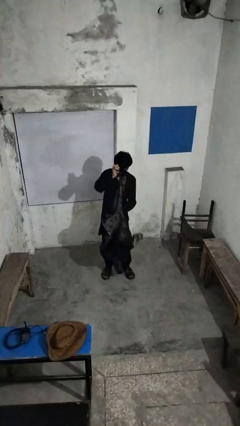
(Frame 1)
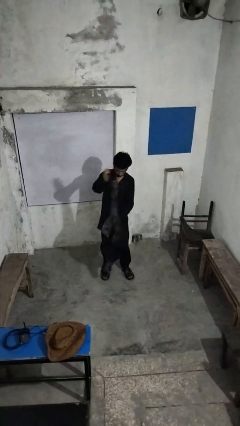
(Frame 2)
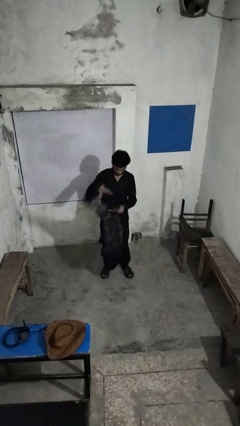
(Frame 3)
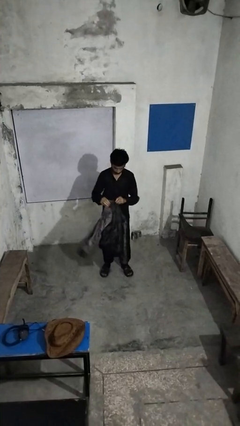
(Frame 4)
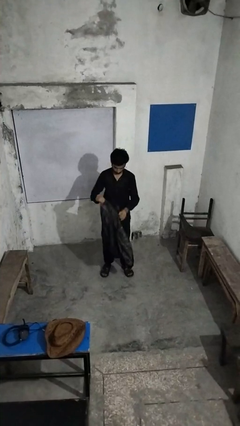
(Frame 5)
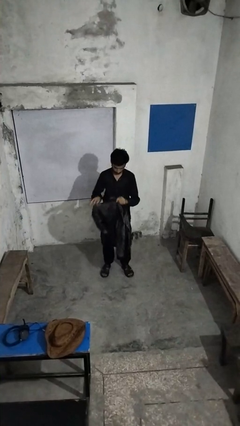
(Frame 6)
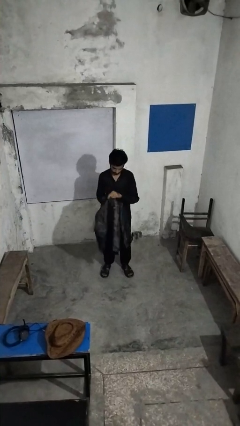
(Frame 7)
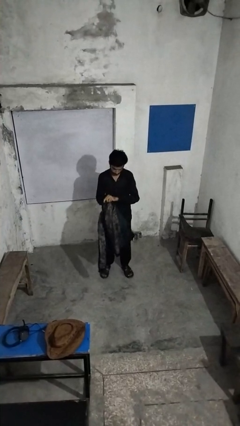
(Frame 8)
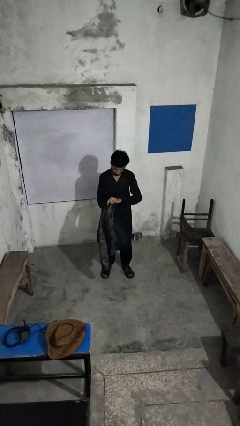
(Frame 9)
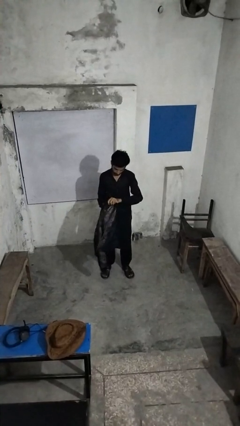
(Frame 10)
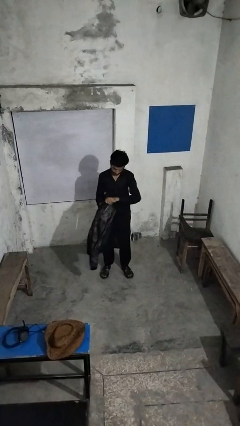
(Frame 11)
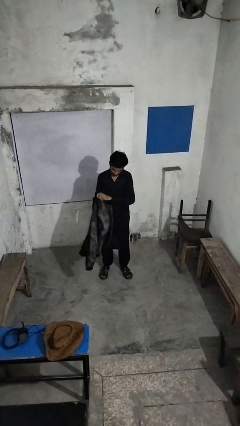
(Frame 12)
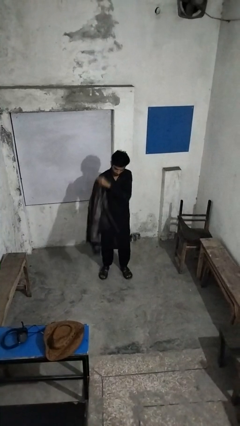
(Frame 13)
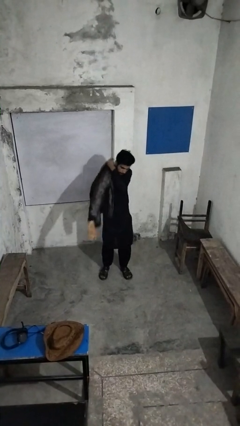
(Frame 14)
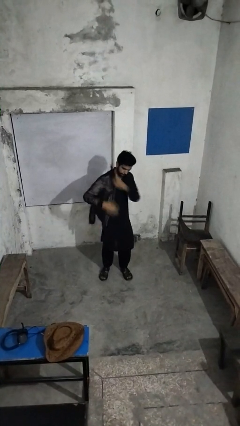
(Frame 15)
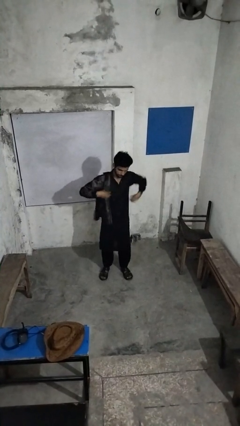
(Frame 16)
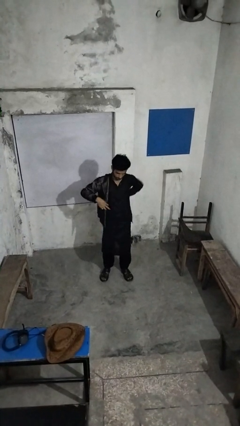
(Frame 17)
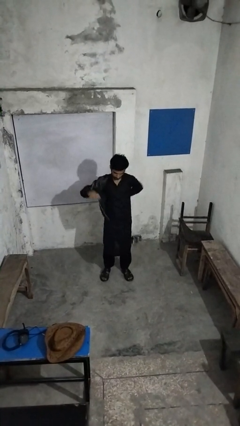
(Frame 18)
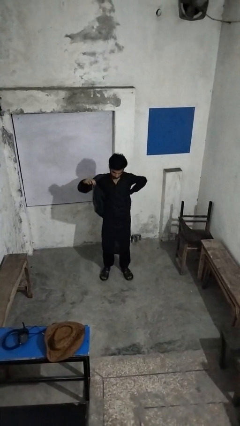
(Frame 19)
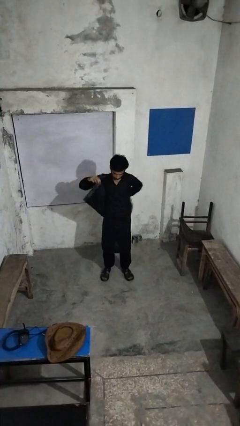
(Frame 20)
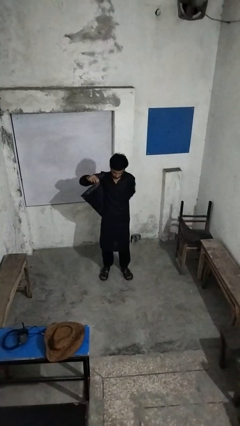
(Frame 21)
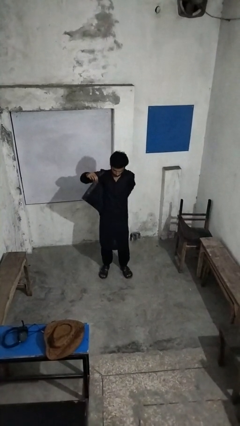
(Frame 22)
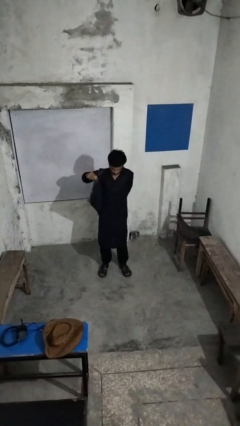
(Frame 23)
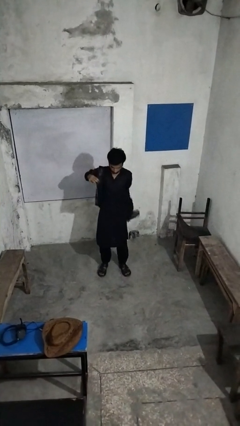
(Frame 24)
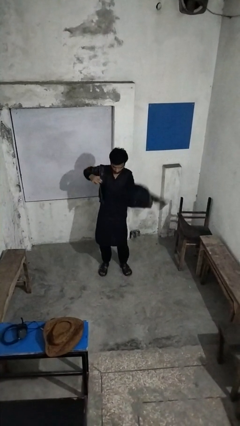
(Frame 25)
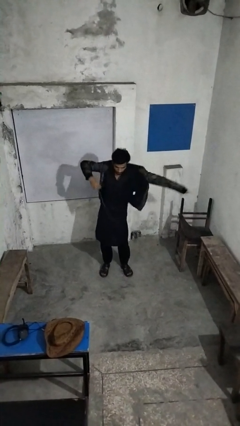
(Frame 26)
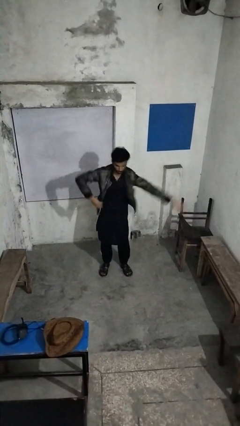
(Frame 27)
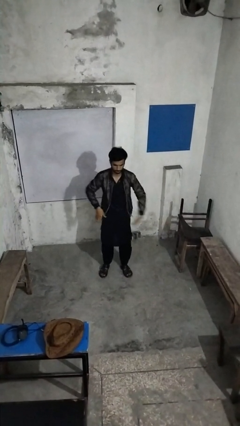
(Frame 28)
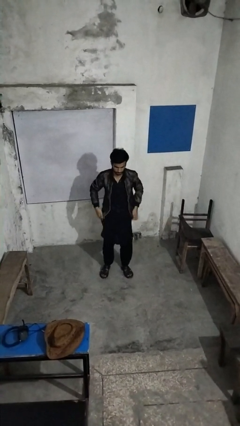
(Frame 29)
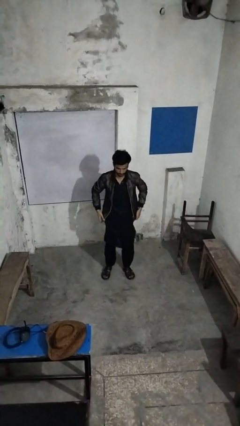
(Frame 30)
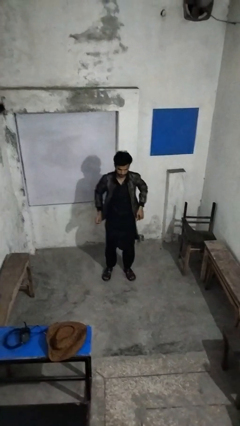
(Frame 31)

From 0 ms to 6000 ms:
person puts on jacket

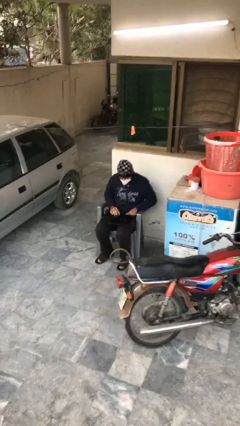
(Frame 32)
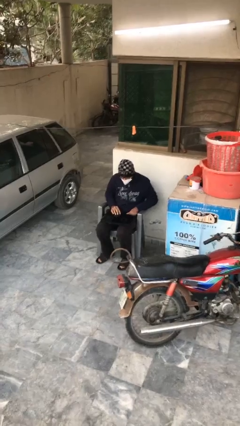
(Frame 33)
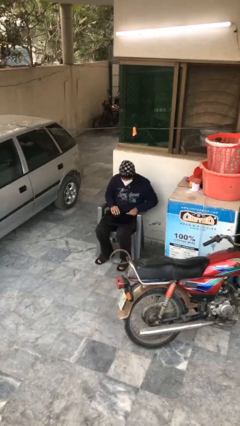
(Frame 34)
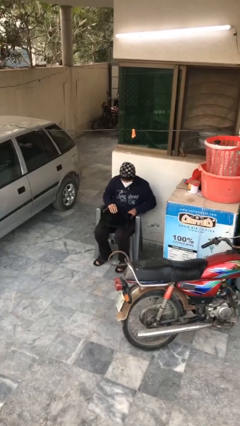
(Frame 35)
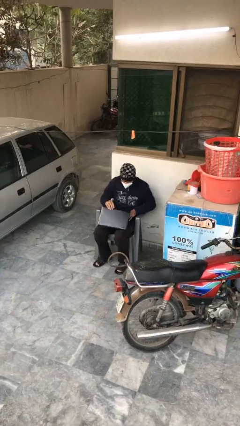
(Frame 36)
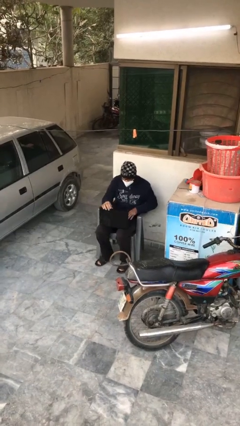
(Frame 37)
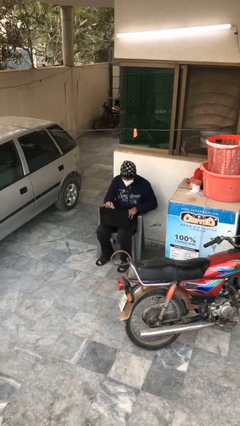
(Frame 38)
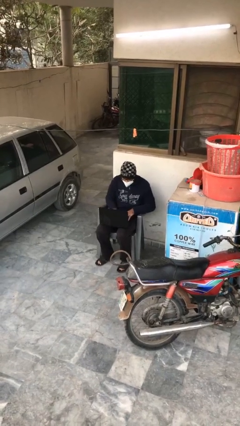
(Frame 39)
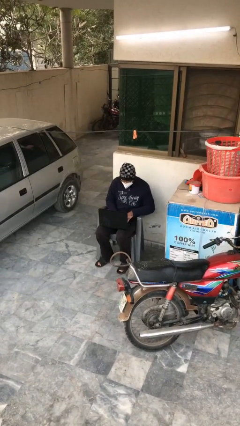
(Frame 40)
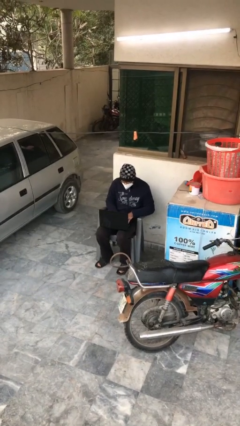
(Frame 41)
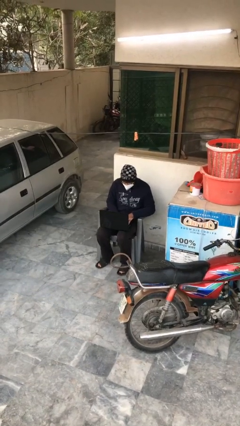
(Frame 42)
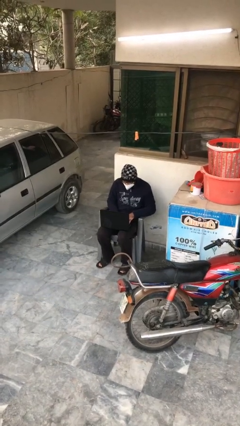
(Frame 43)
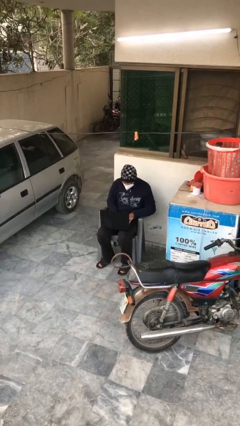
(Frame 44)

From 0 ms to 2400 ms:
person interacts with laptop

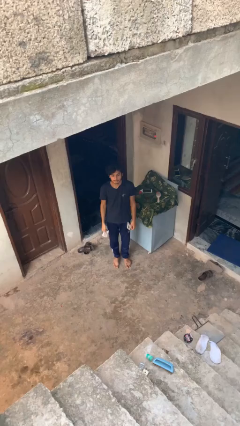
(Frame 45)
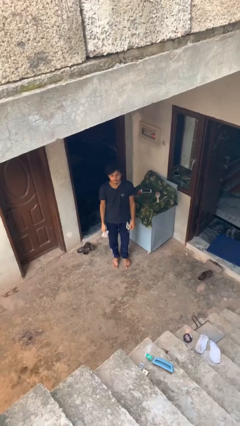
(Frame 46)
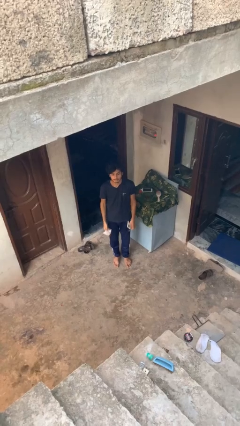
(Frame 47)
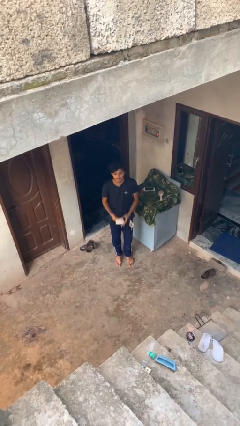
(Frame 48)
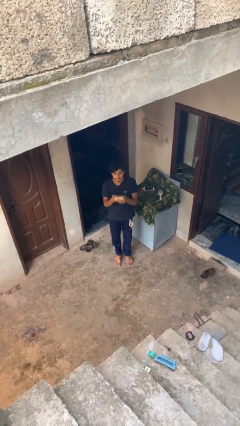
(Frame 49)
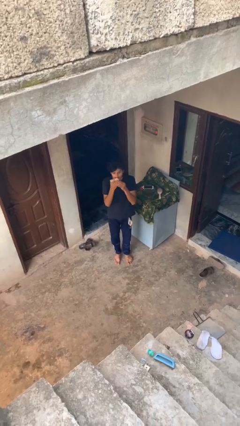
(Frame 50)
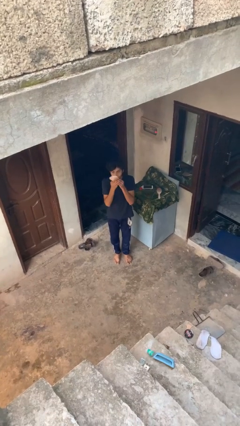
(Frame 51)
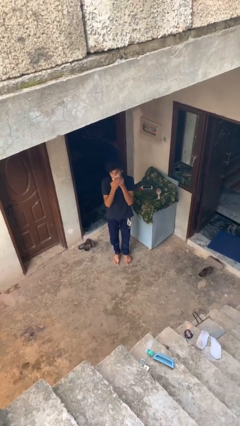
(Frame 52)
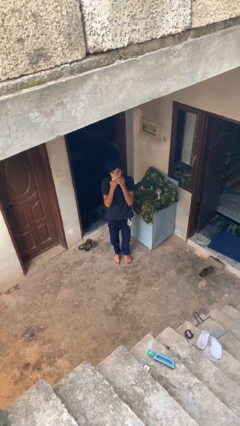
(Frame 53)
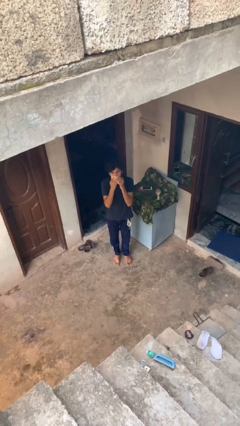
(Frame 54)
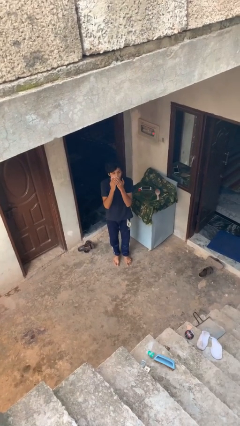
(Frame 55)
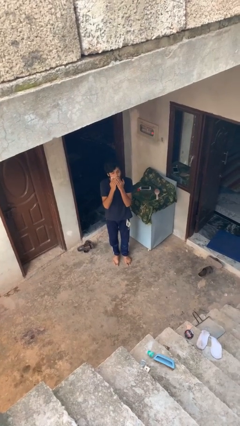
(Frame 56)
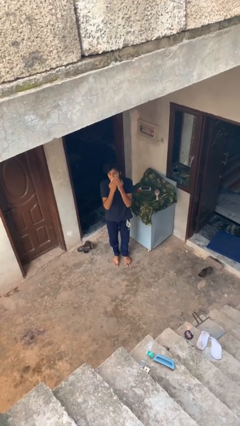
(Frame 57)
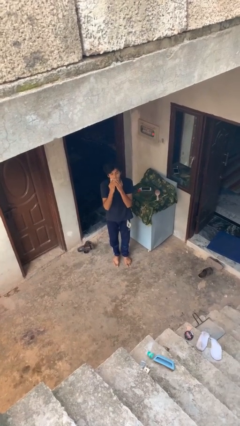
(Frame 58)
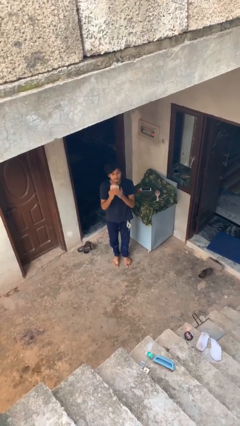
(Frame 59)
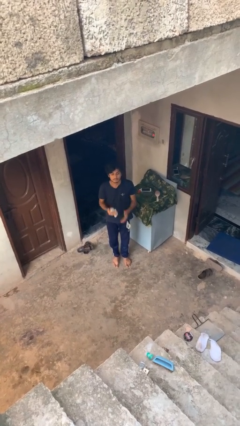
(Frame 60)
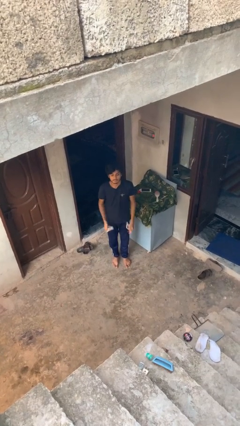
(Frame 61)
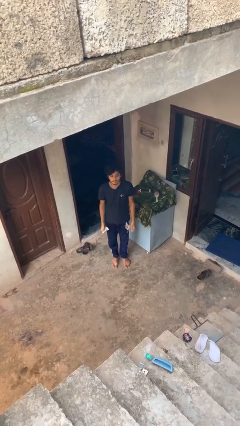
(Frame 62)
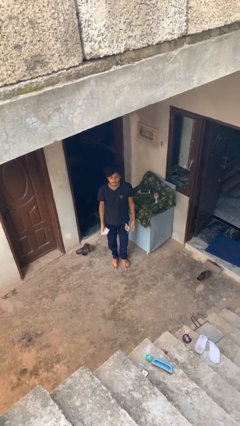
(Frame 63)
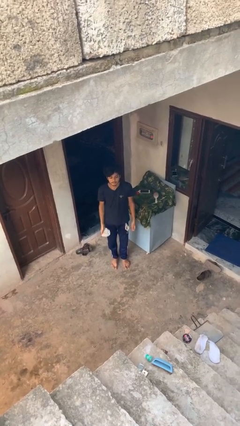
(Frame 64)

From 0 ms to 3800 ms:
person wipes mouth with napkin

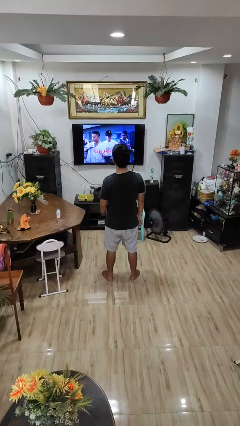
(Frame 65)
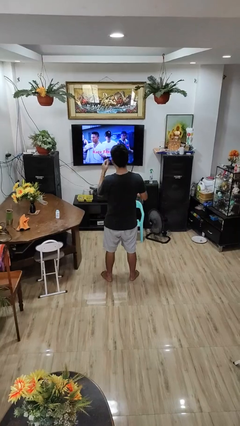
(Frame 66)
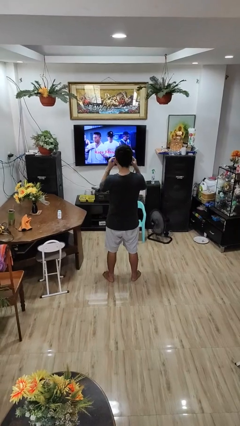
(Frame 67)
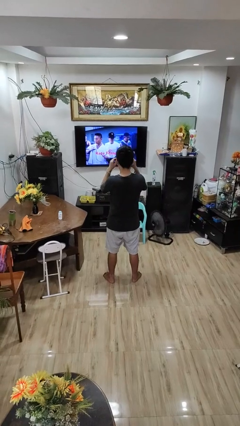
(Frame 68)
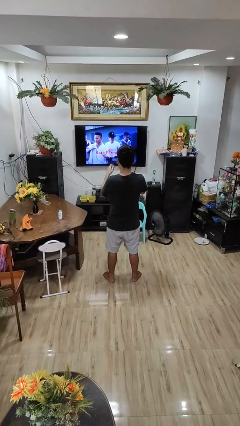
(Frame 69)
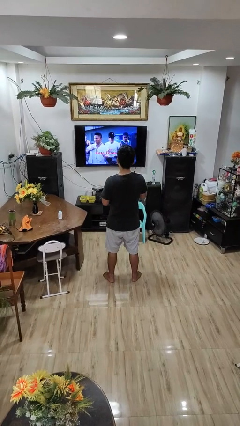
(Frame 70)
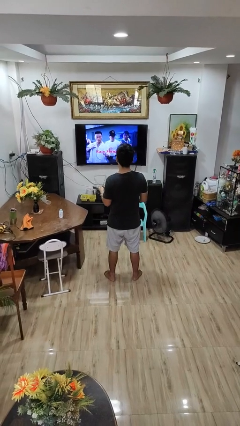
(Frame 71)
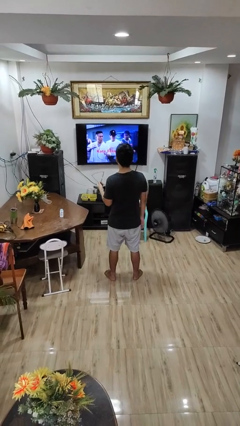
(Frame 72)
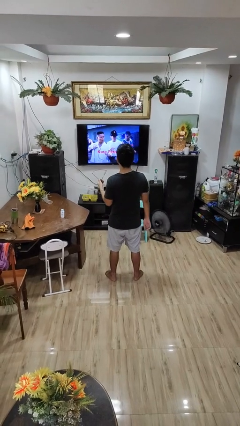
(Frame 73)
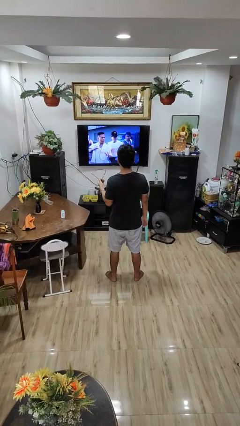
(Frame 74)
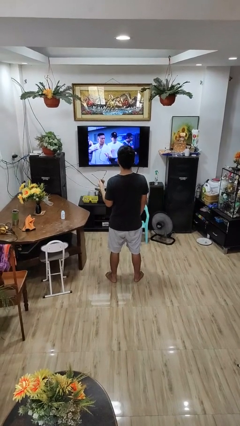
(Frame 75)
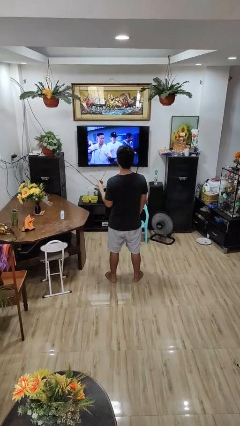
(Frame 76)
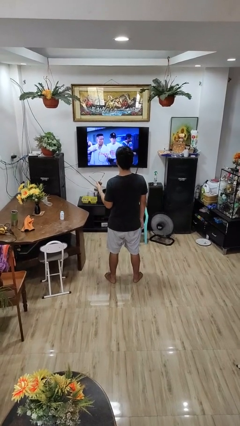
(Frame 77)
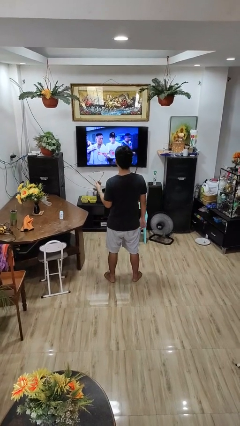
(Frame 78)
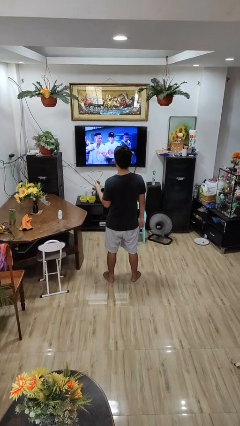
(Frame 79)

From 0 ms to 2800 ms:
person takes off glasses

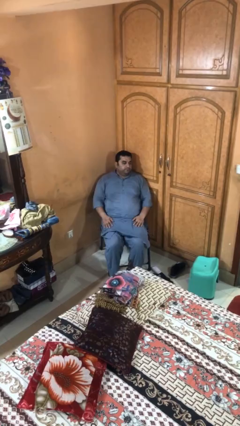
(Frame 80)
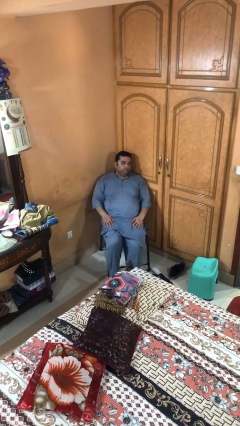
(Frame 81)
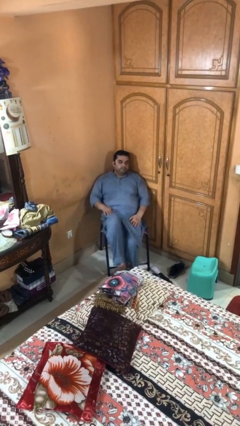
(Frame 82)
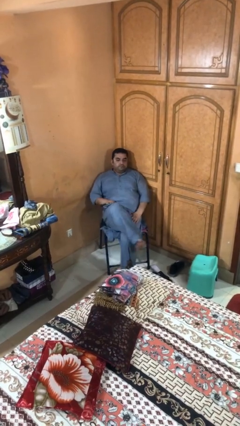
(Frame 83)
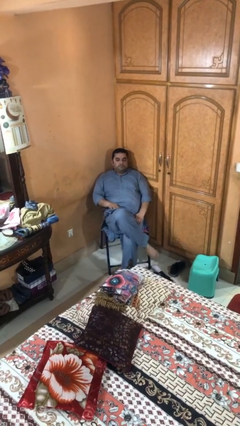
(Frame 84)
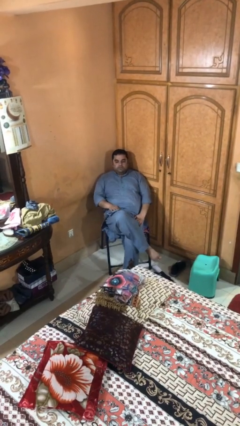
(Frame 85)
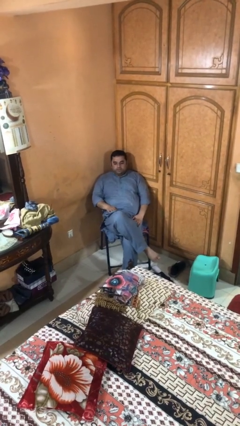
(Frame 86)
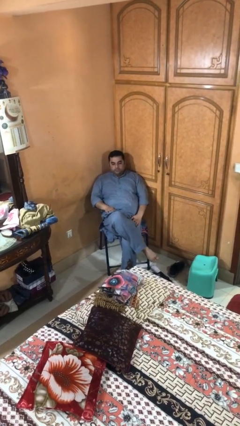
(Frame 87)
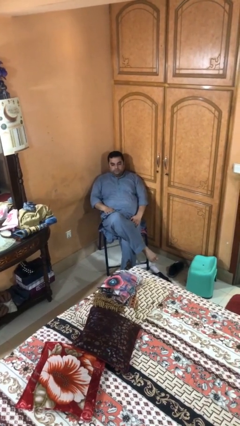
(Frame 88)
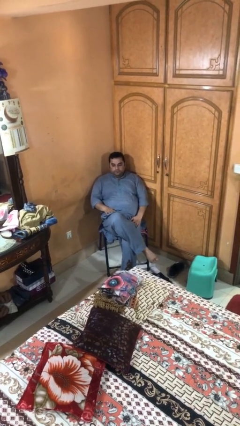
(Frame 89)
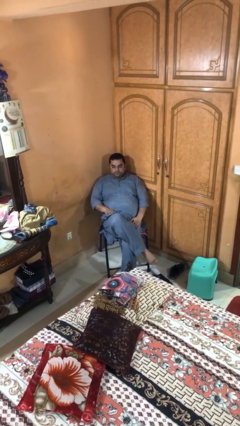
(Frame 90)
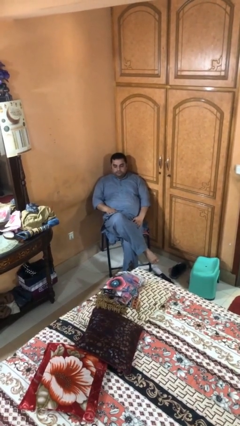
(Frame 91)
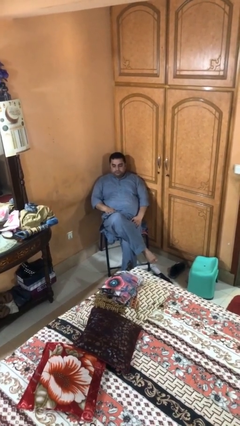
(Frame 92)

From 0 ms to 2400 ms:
person crosses legs
